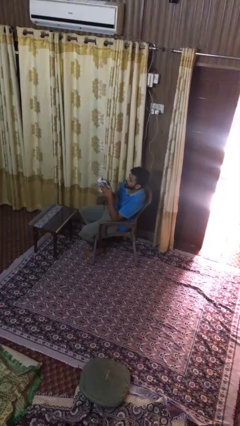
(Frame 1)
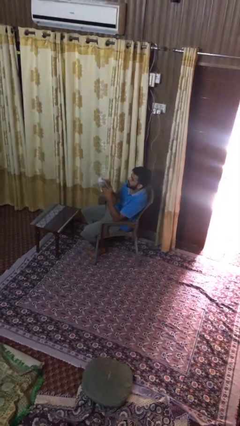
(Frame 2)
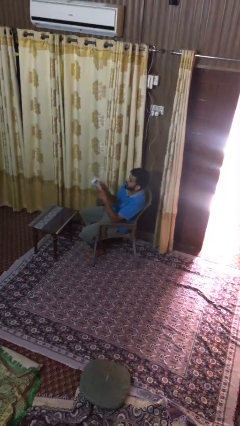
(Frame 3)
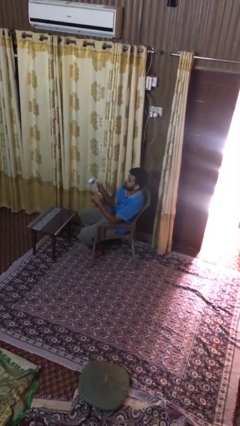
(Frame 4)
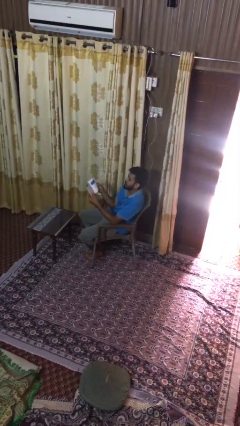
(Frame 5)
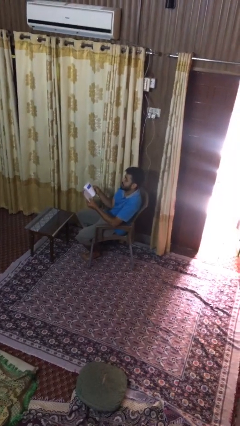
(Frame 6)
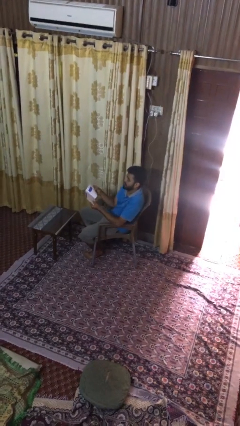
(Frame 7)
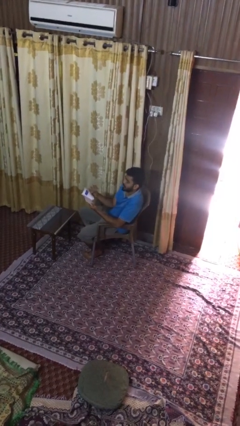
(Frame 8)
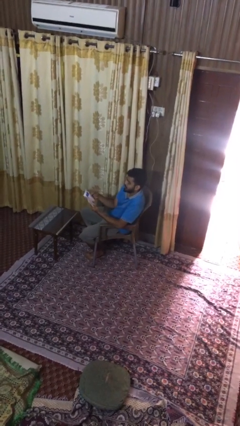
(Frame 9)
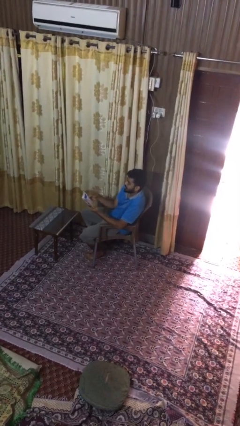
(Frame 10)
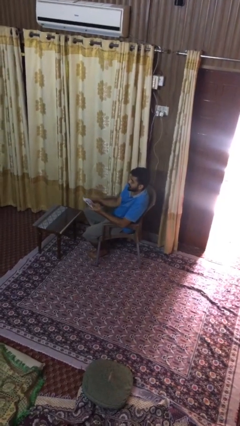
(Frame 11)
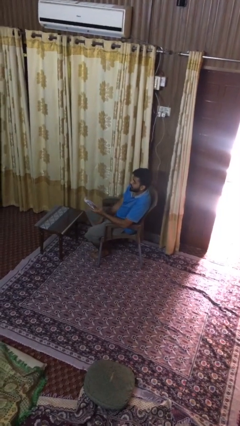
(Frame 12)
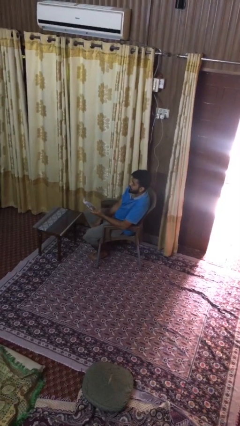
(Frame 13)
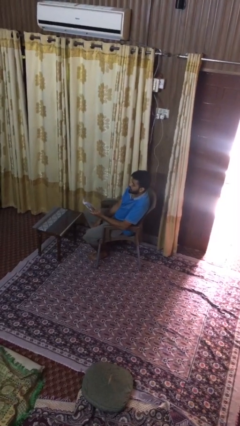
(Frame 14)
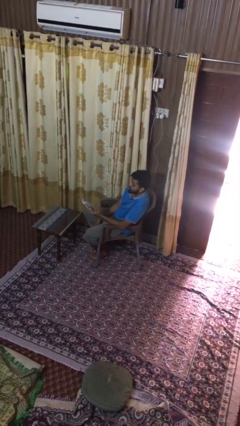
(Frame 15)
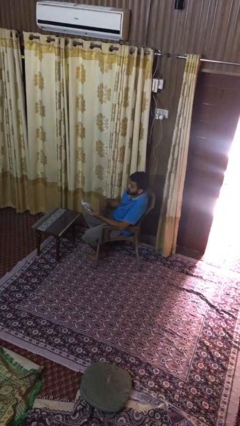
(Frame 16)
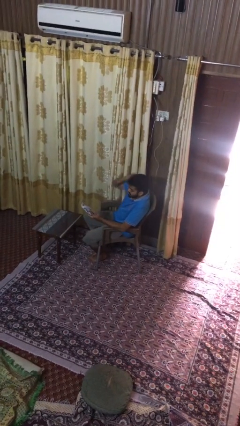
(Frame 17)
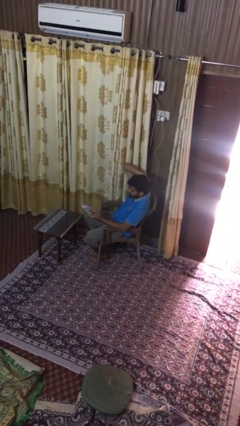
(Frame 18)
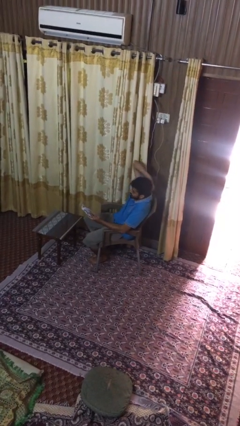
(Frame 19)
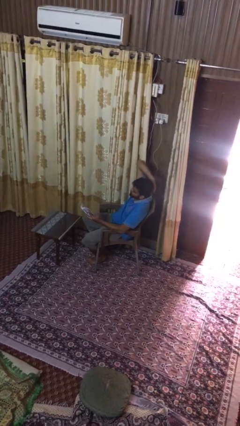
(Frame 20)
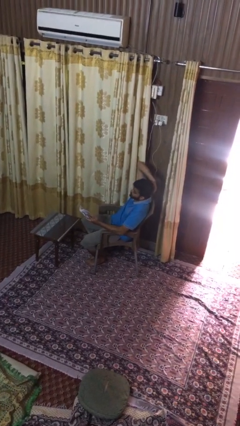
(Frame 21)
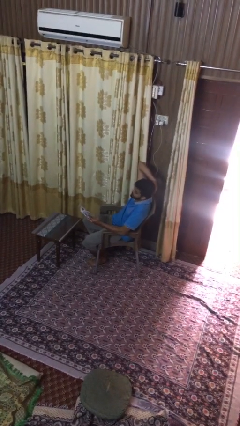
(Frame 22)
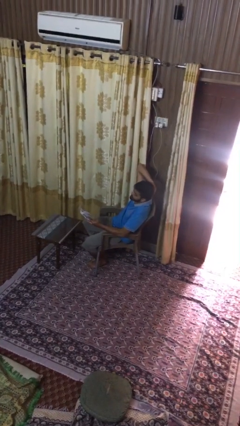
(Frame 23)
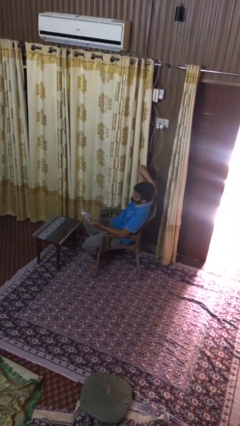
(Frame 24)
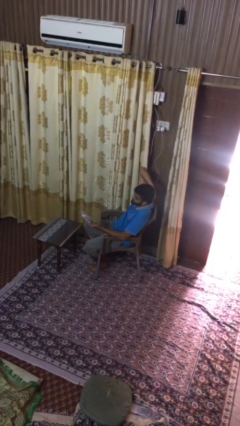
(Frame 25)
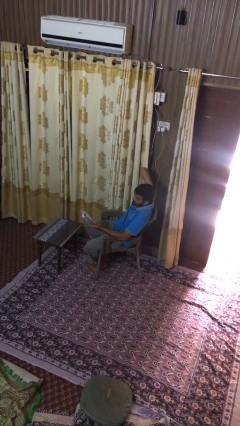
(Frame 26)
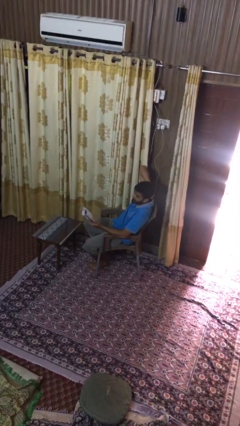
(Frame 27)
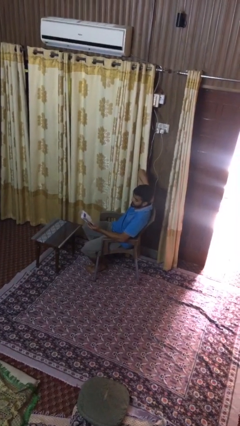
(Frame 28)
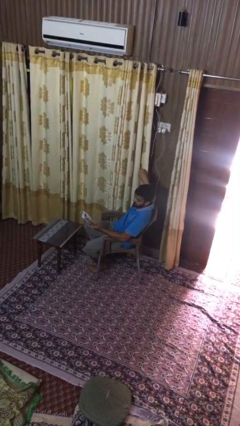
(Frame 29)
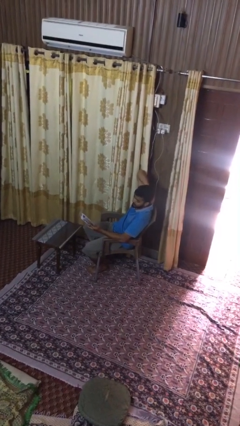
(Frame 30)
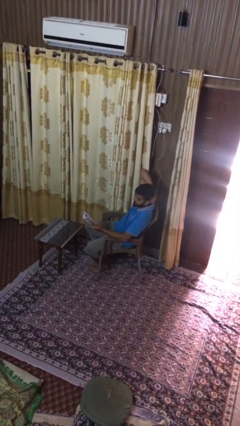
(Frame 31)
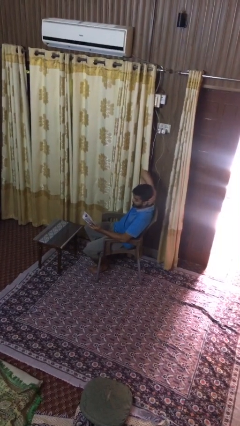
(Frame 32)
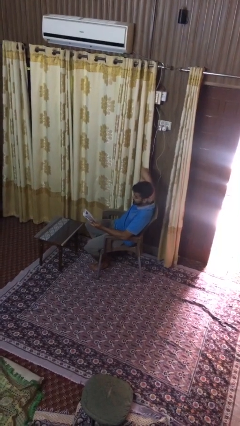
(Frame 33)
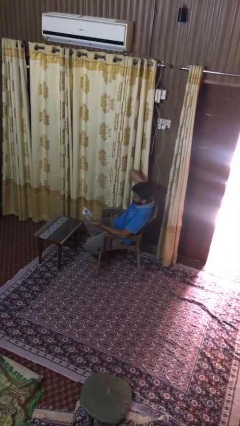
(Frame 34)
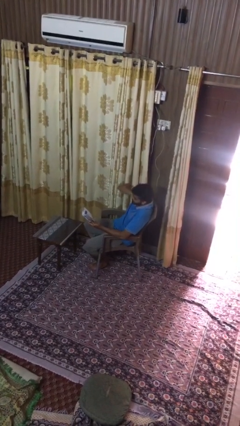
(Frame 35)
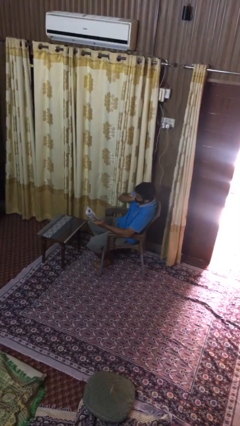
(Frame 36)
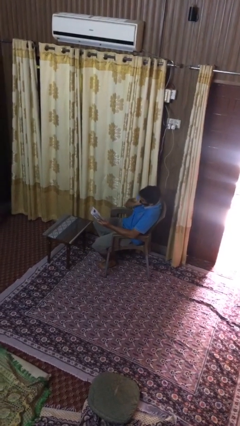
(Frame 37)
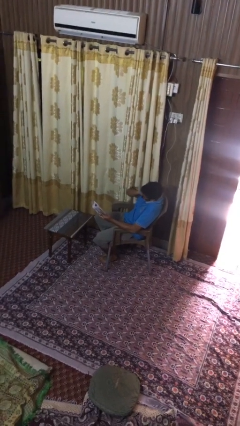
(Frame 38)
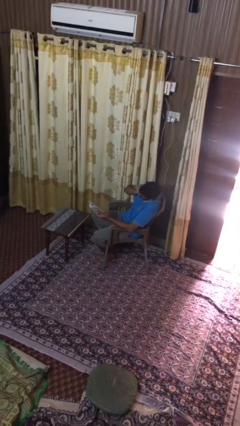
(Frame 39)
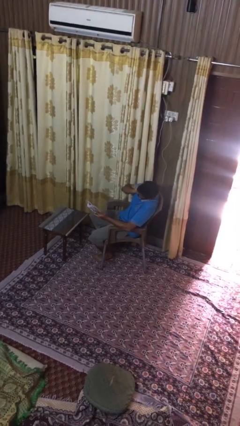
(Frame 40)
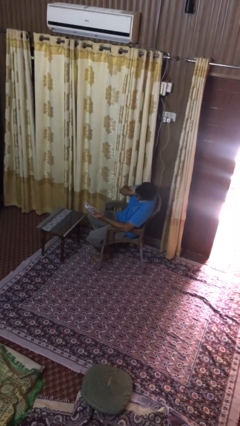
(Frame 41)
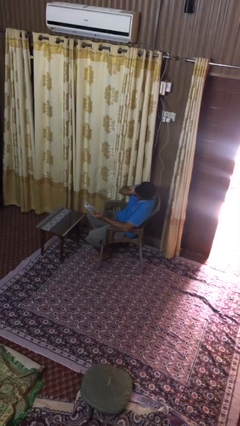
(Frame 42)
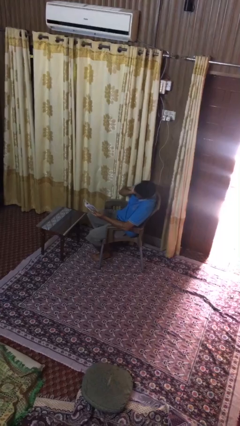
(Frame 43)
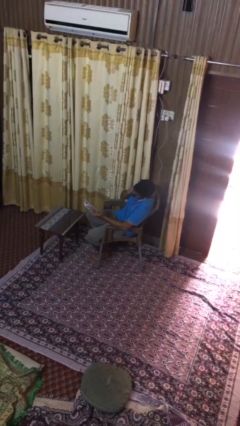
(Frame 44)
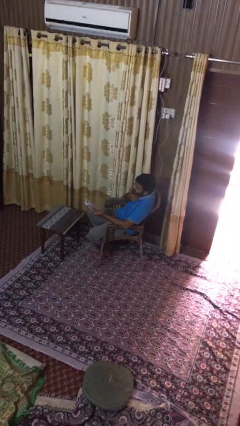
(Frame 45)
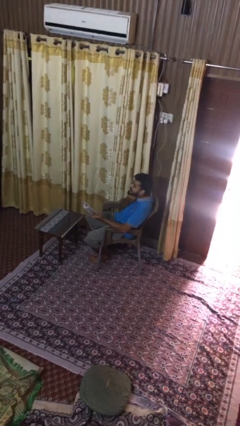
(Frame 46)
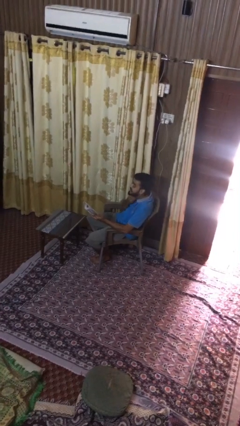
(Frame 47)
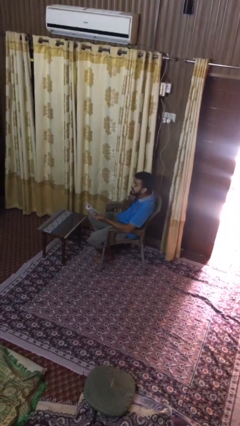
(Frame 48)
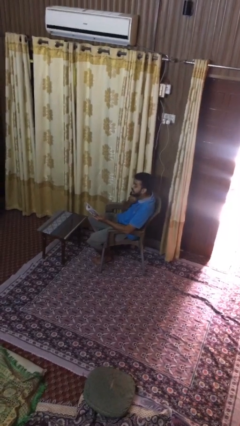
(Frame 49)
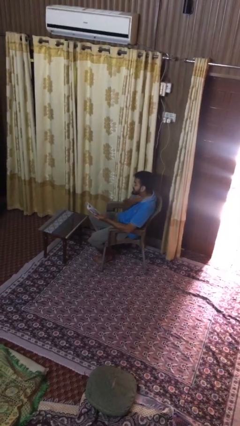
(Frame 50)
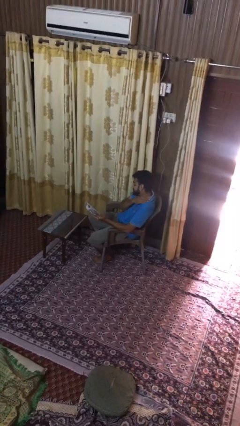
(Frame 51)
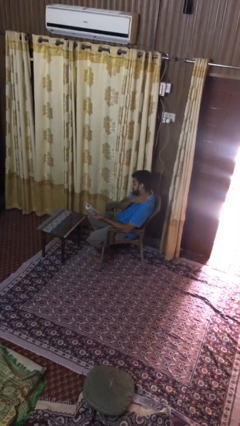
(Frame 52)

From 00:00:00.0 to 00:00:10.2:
person reads document

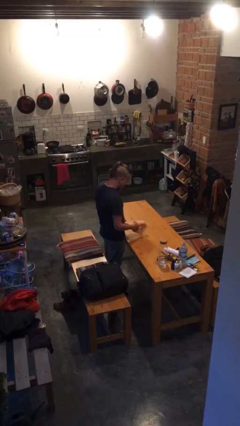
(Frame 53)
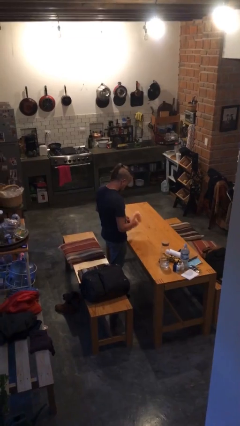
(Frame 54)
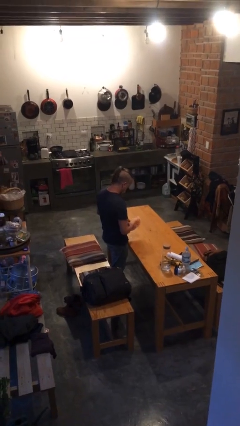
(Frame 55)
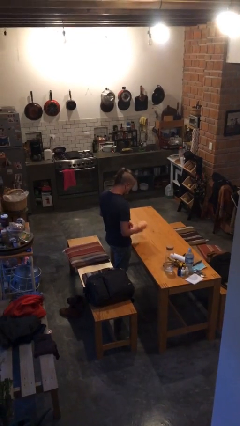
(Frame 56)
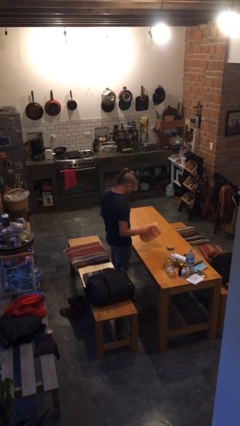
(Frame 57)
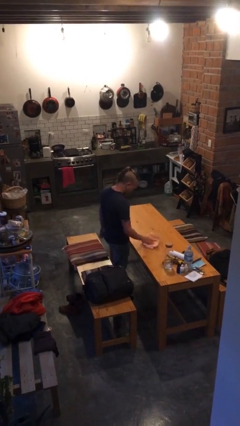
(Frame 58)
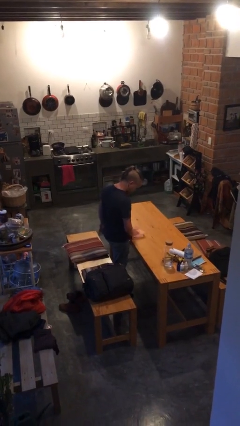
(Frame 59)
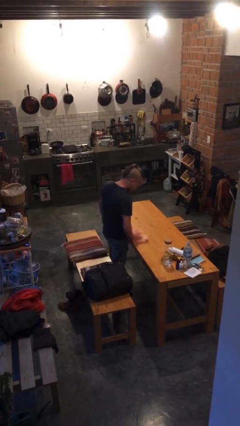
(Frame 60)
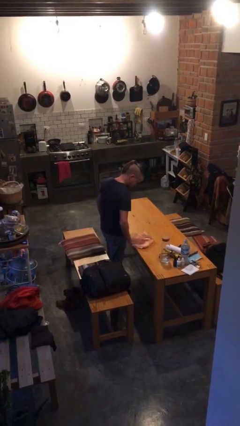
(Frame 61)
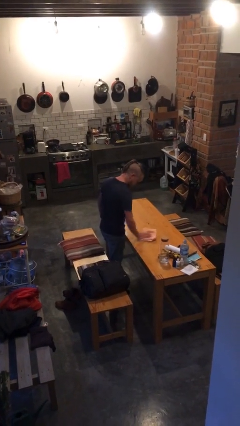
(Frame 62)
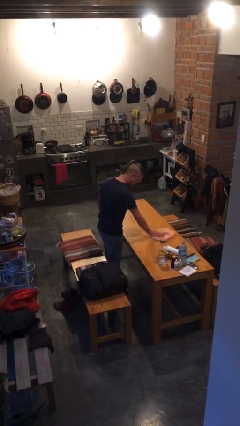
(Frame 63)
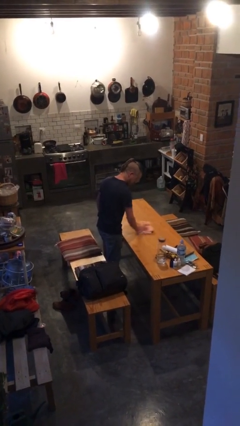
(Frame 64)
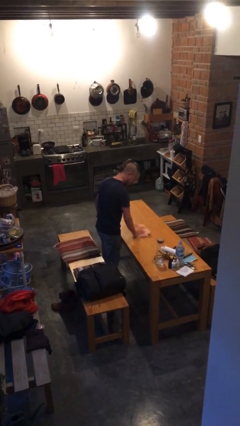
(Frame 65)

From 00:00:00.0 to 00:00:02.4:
person cleans table with rag

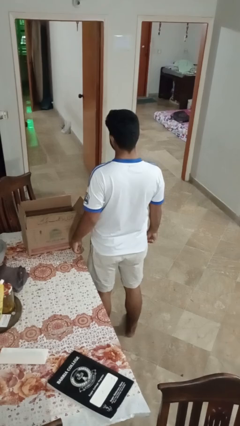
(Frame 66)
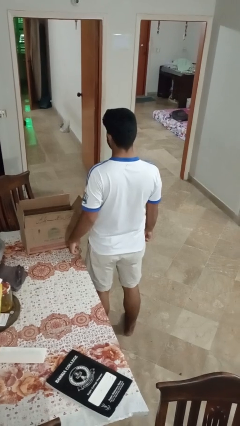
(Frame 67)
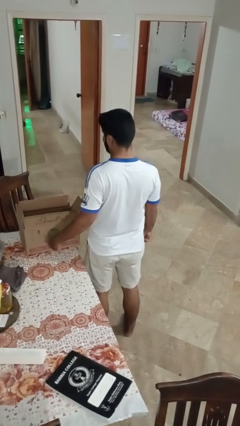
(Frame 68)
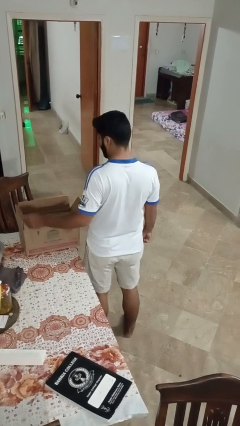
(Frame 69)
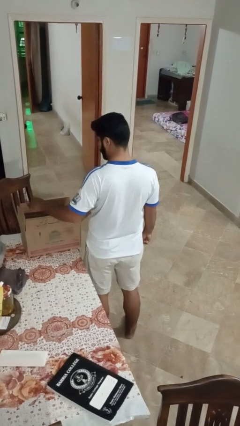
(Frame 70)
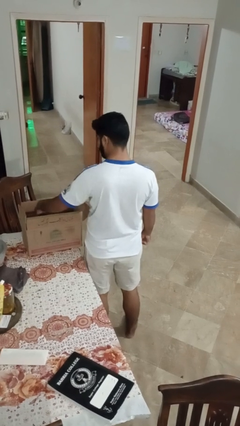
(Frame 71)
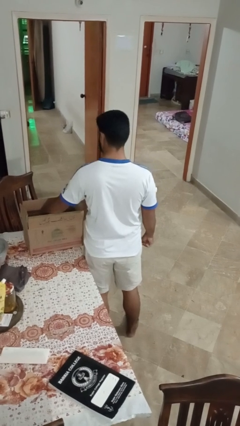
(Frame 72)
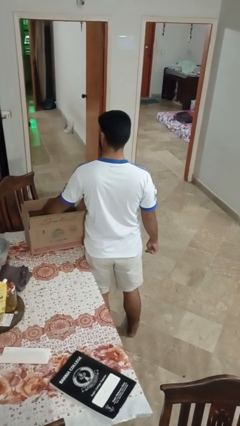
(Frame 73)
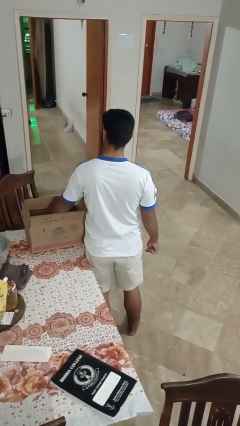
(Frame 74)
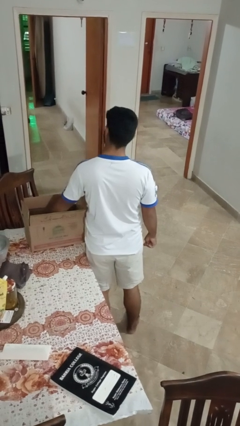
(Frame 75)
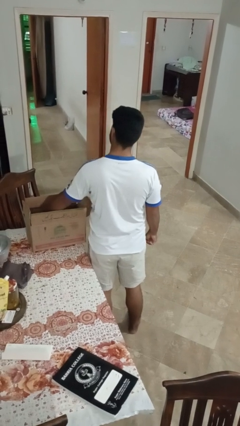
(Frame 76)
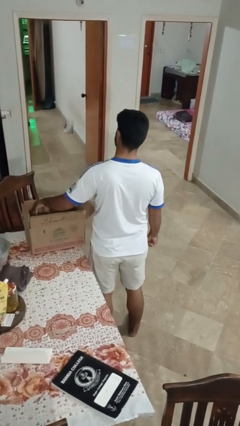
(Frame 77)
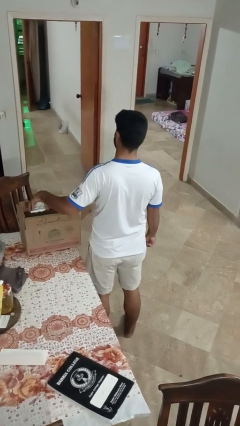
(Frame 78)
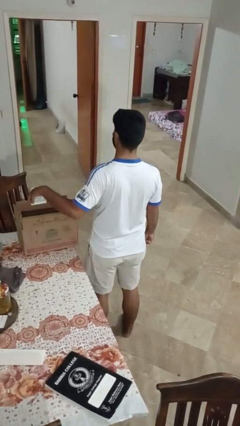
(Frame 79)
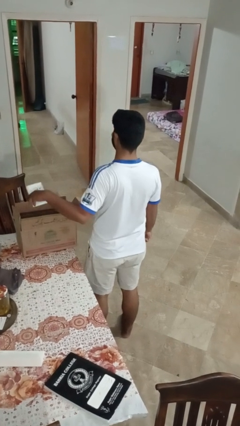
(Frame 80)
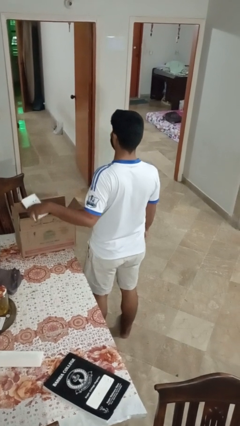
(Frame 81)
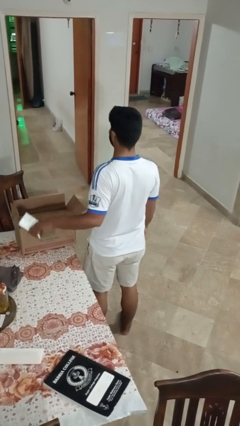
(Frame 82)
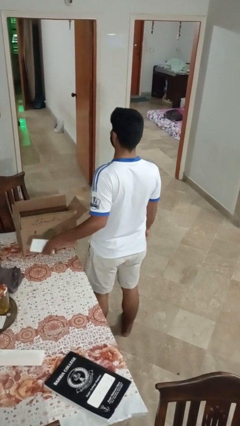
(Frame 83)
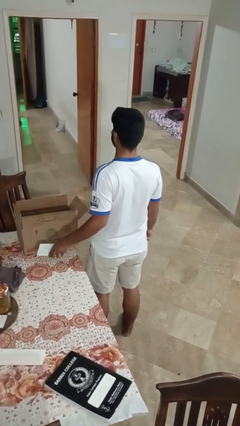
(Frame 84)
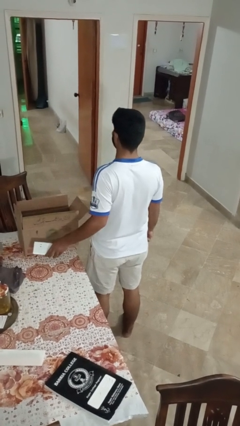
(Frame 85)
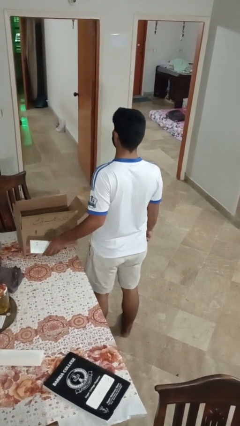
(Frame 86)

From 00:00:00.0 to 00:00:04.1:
person takes object from box

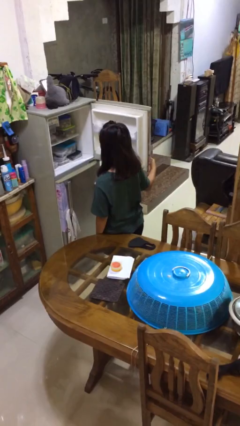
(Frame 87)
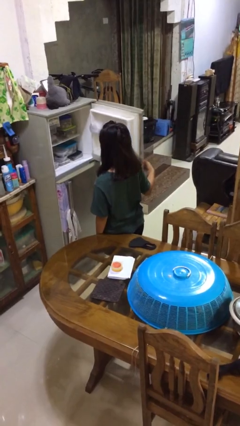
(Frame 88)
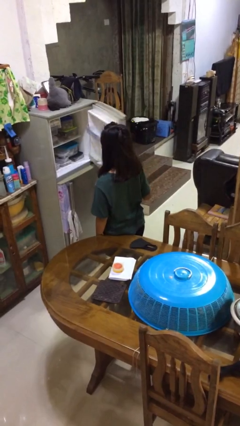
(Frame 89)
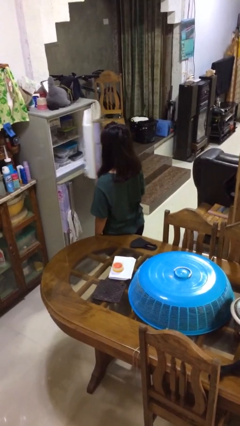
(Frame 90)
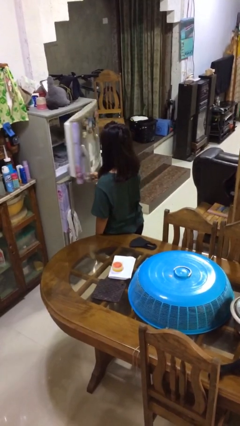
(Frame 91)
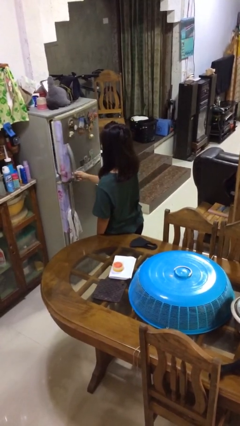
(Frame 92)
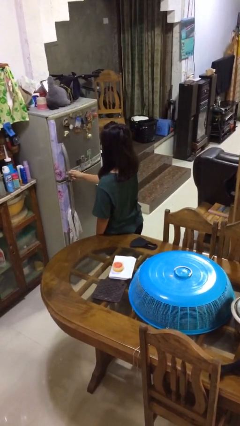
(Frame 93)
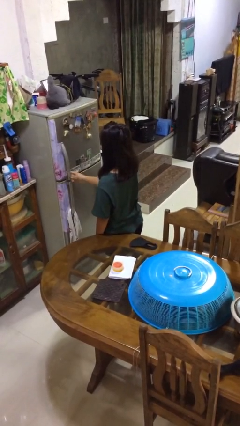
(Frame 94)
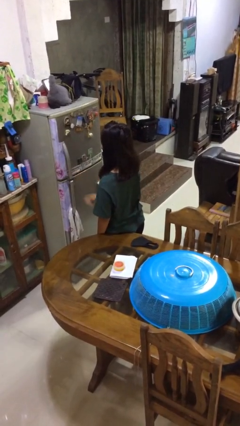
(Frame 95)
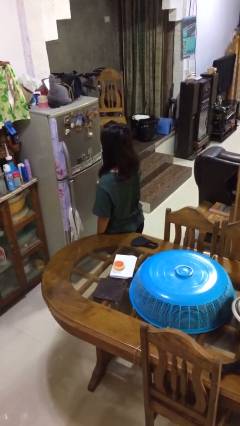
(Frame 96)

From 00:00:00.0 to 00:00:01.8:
person closes refrigerator
